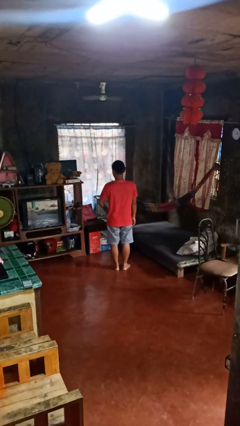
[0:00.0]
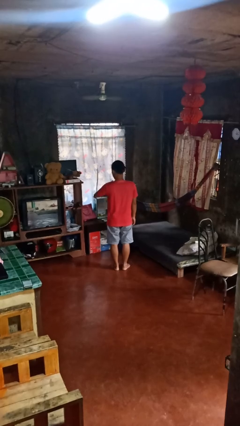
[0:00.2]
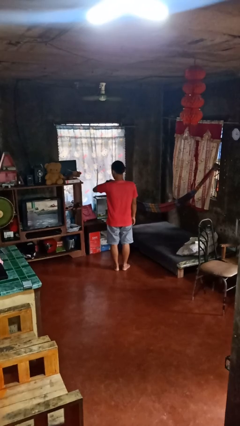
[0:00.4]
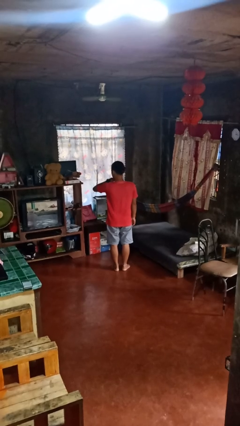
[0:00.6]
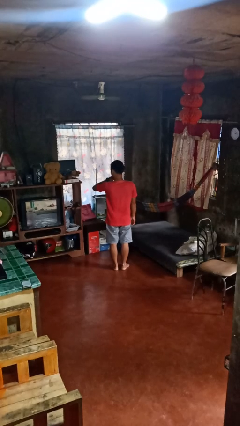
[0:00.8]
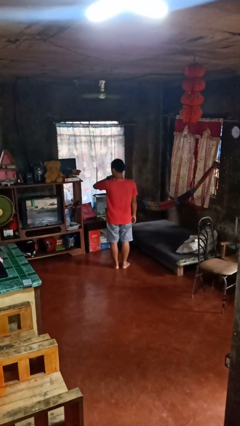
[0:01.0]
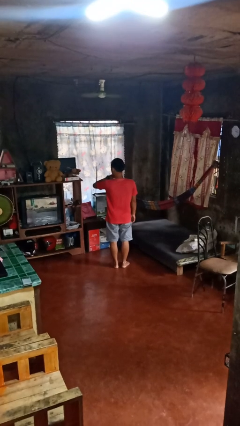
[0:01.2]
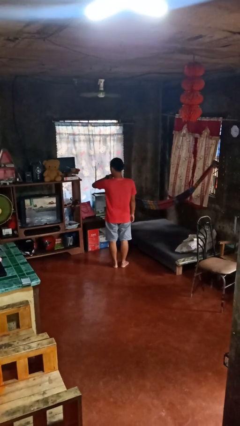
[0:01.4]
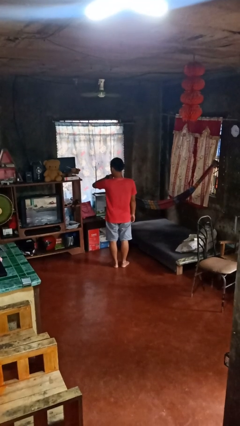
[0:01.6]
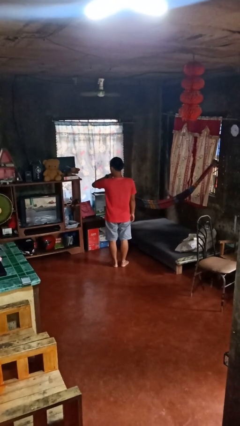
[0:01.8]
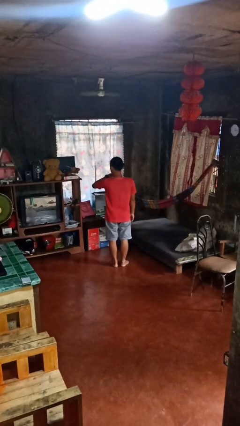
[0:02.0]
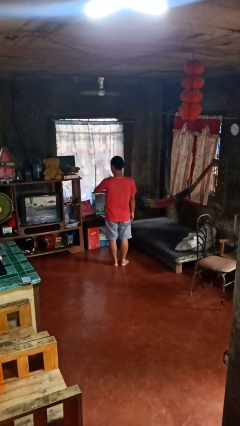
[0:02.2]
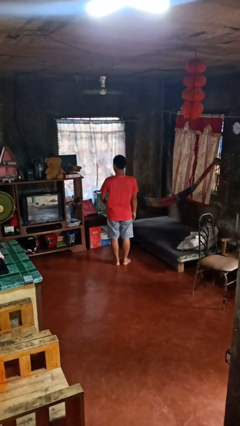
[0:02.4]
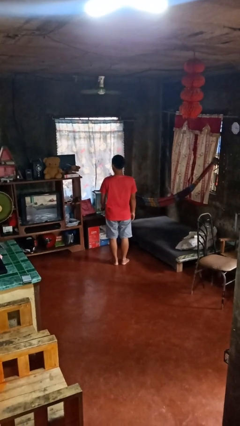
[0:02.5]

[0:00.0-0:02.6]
person looks at wristwatch

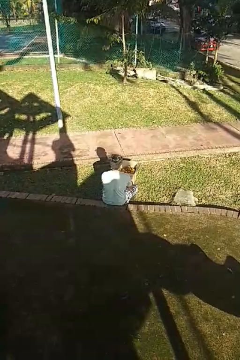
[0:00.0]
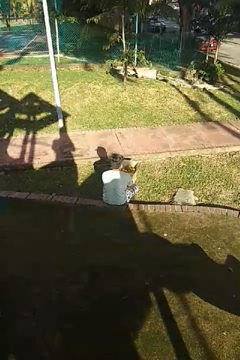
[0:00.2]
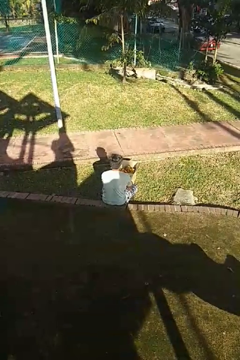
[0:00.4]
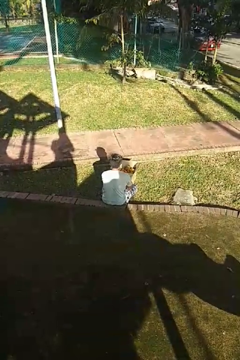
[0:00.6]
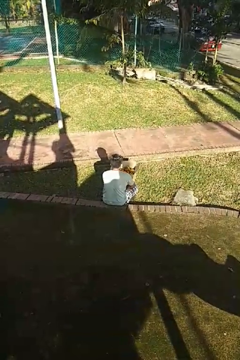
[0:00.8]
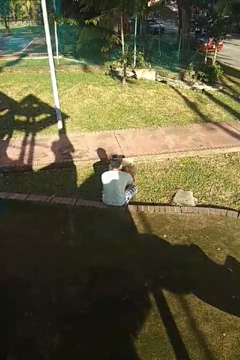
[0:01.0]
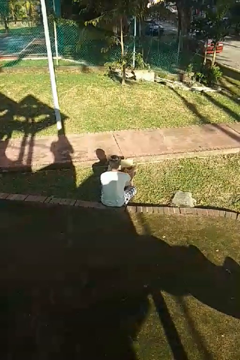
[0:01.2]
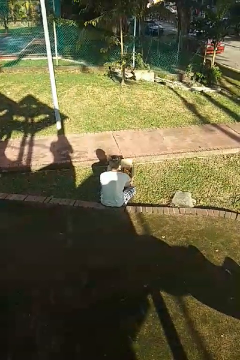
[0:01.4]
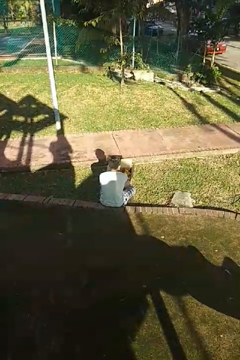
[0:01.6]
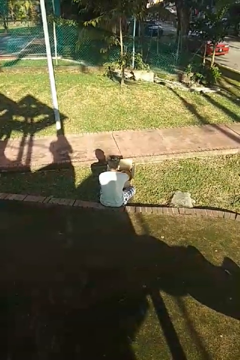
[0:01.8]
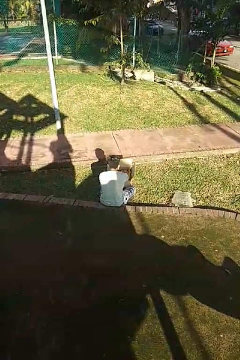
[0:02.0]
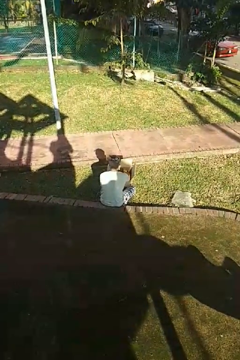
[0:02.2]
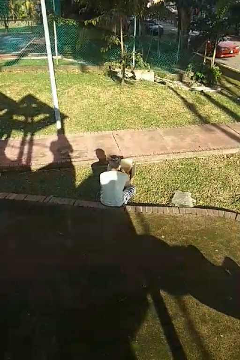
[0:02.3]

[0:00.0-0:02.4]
person searches in box

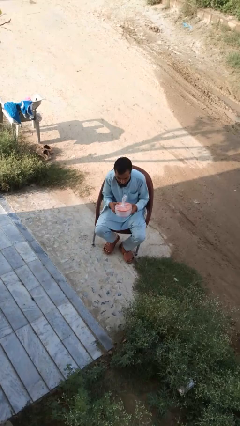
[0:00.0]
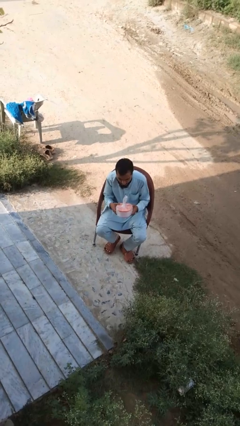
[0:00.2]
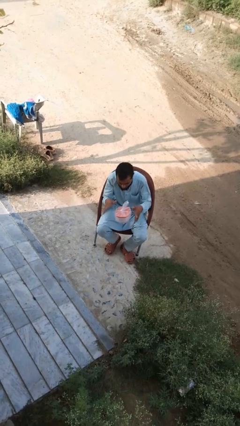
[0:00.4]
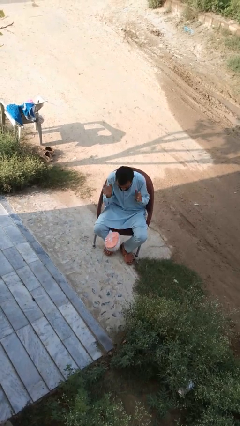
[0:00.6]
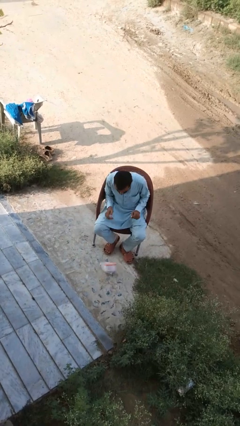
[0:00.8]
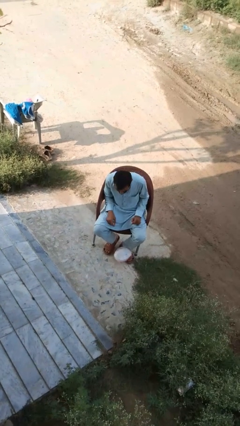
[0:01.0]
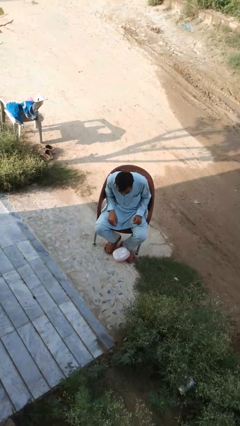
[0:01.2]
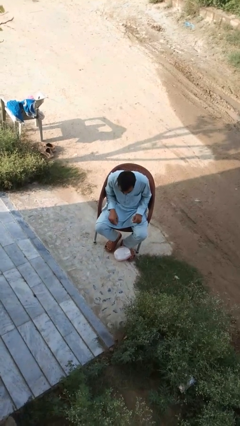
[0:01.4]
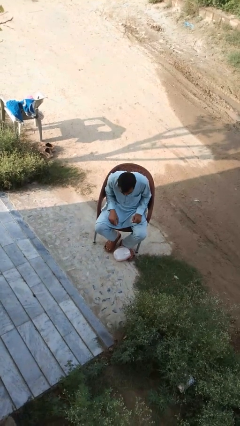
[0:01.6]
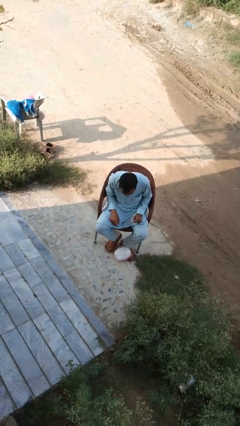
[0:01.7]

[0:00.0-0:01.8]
person drops object

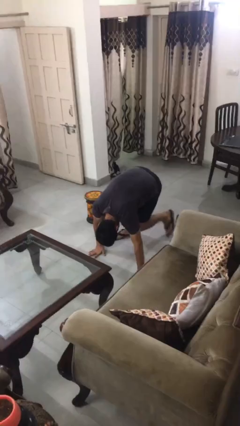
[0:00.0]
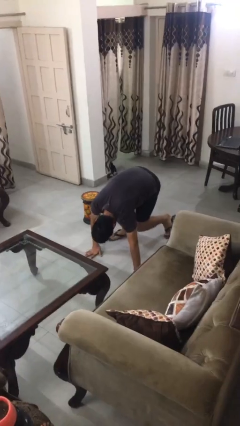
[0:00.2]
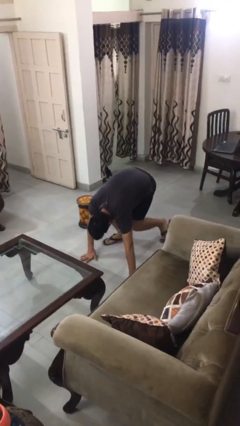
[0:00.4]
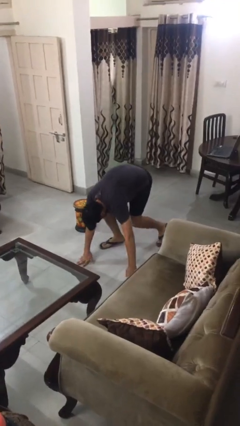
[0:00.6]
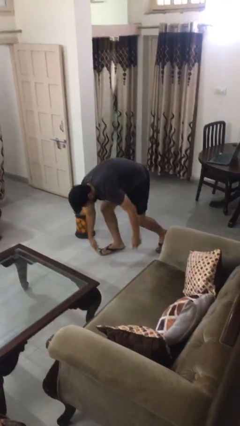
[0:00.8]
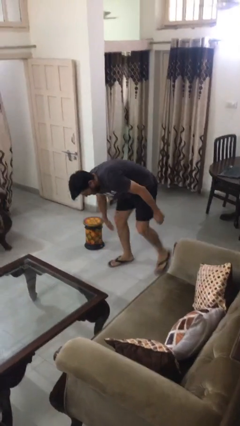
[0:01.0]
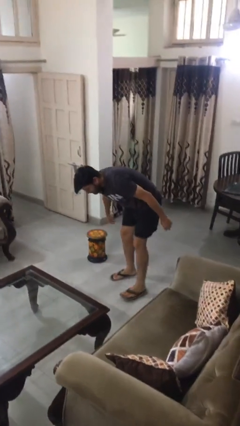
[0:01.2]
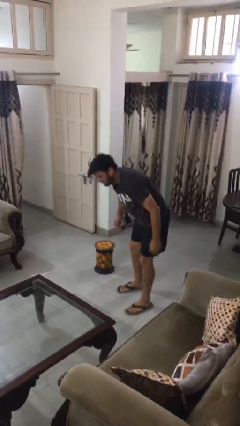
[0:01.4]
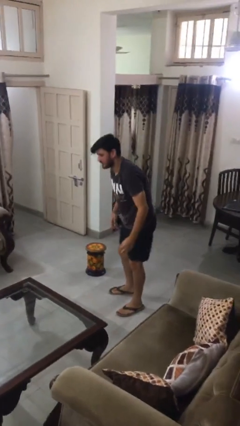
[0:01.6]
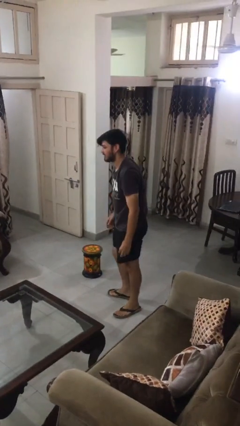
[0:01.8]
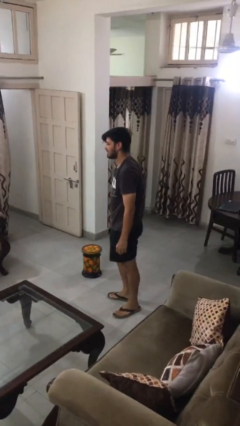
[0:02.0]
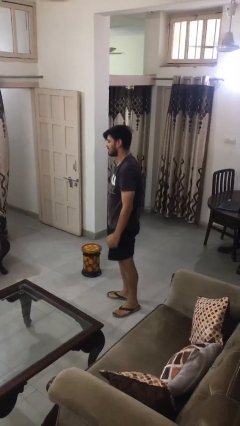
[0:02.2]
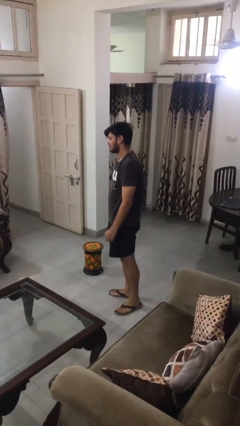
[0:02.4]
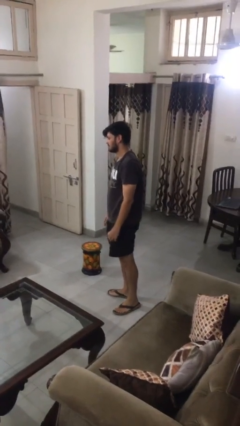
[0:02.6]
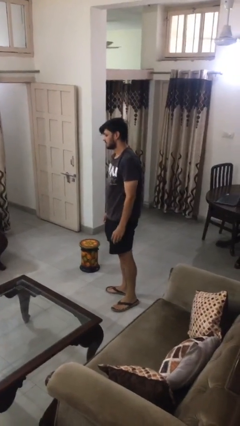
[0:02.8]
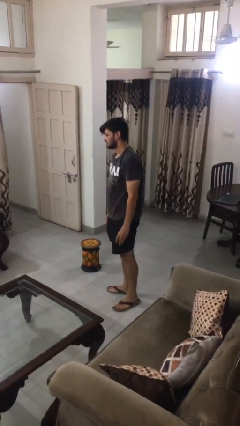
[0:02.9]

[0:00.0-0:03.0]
person stands up from floor

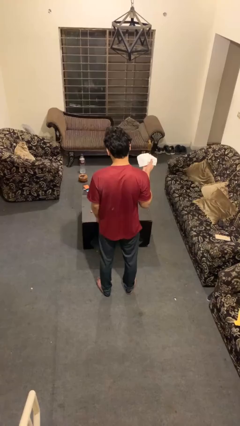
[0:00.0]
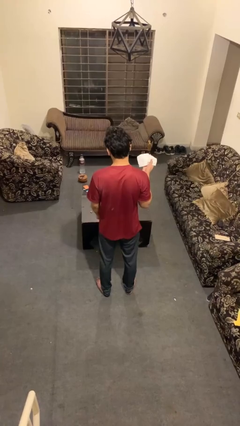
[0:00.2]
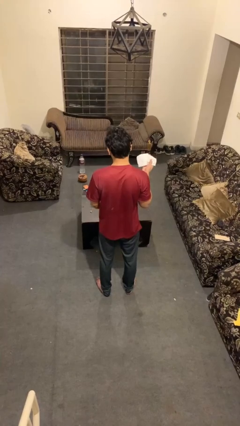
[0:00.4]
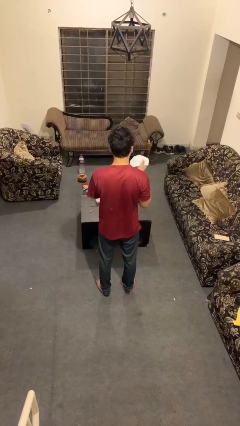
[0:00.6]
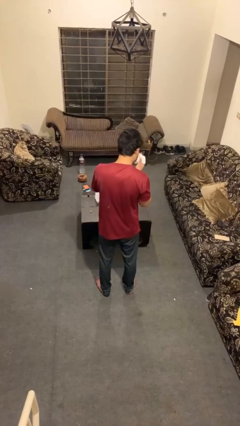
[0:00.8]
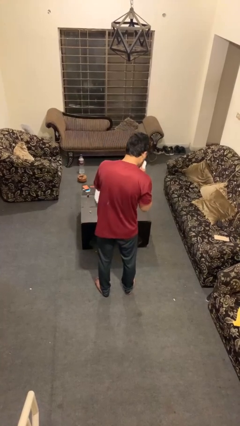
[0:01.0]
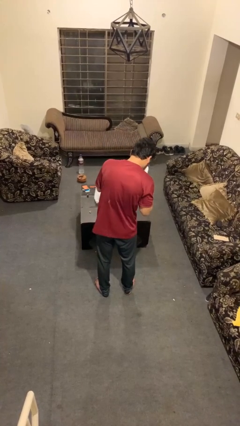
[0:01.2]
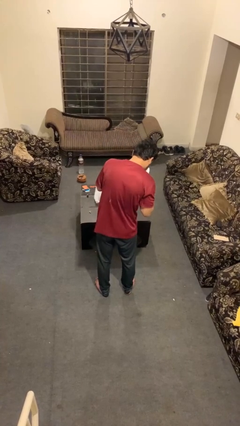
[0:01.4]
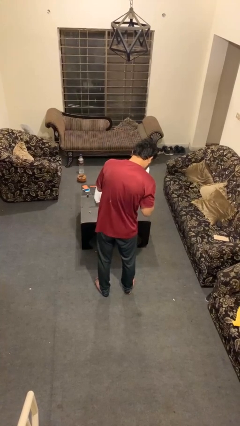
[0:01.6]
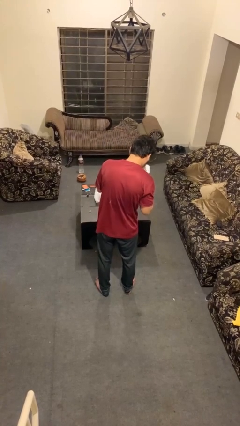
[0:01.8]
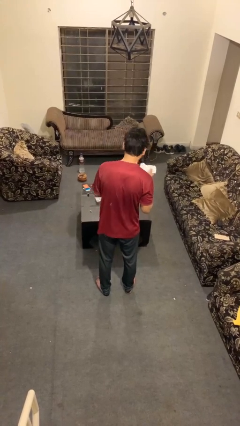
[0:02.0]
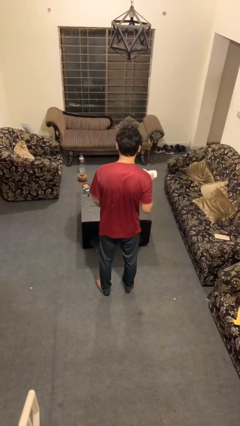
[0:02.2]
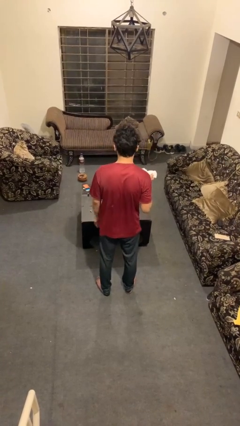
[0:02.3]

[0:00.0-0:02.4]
person blows nose

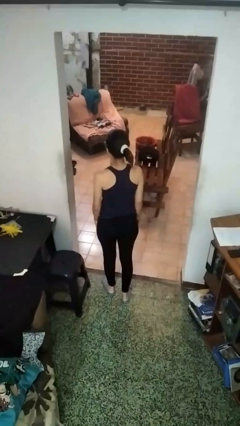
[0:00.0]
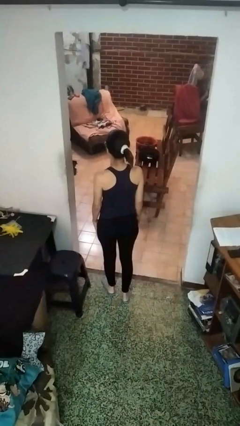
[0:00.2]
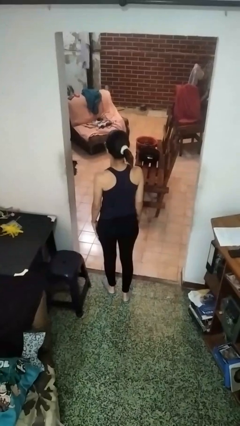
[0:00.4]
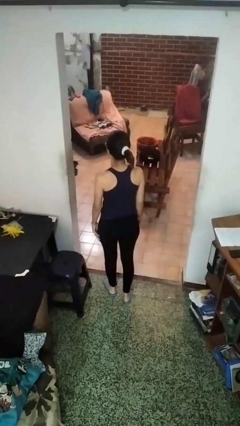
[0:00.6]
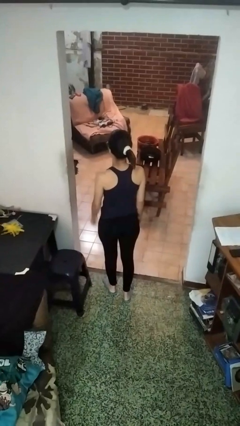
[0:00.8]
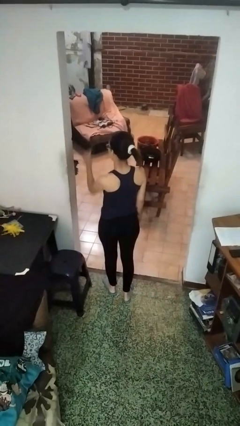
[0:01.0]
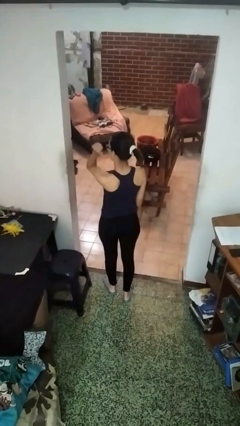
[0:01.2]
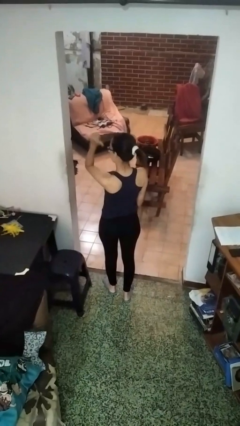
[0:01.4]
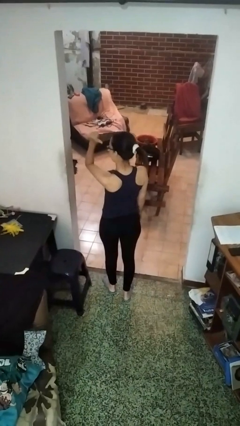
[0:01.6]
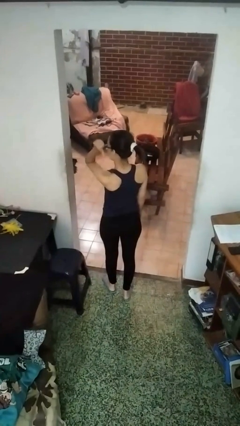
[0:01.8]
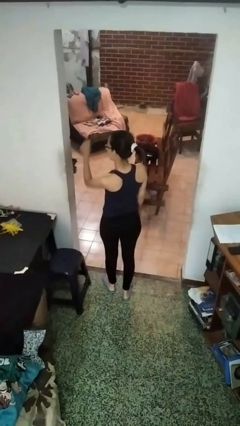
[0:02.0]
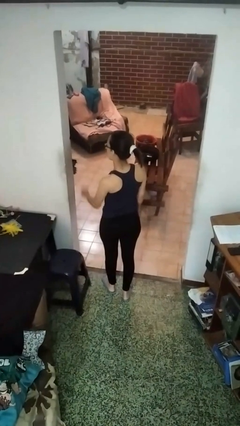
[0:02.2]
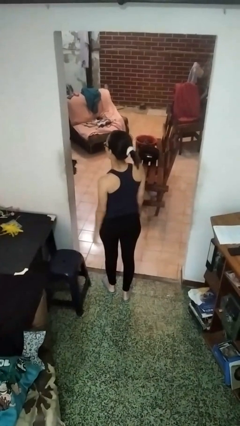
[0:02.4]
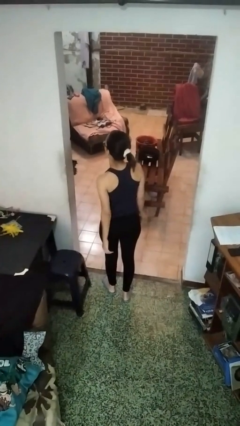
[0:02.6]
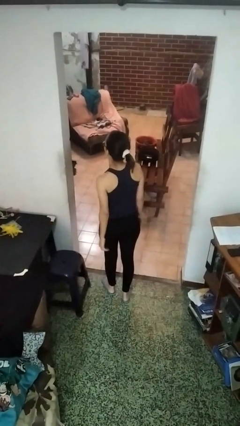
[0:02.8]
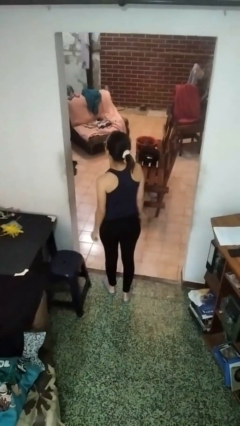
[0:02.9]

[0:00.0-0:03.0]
person gestures behind me

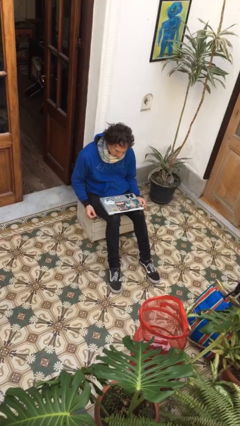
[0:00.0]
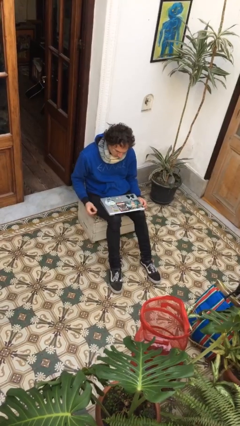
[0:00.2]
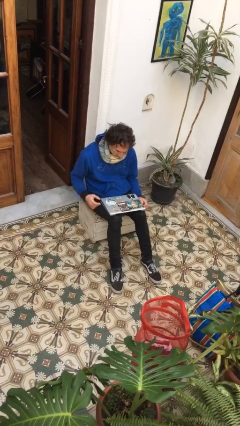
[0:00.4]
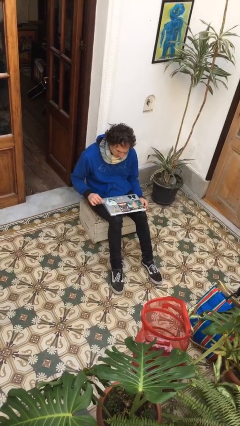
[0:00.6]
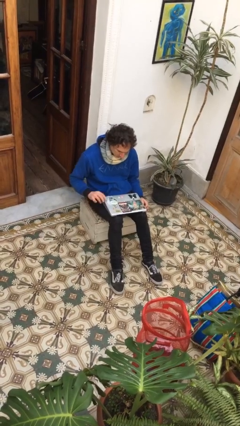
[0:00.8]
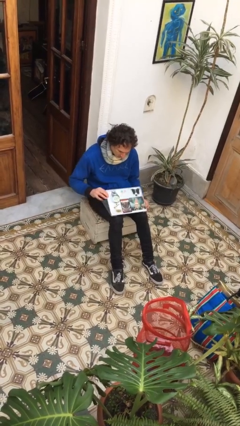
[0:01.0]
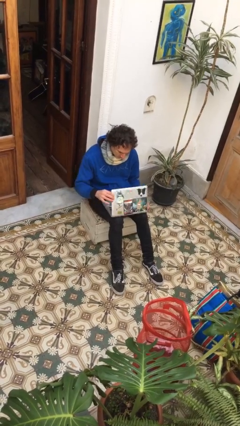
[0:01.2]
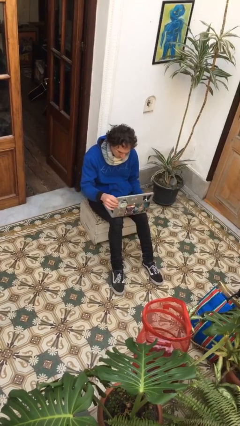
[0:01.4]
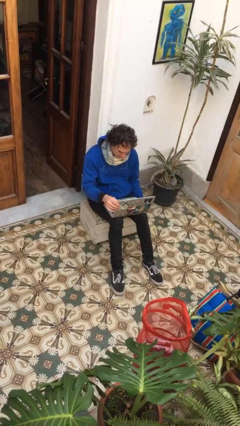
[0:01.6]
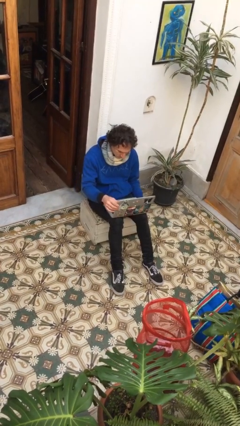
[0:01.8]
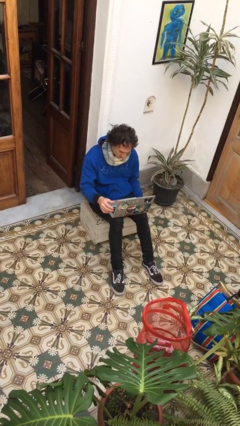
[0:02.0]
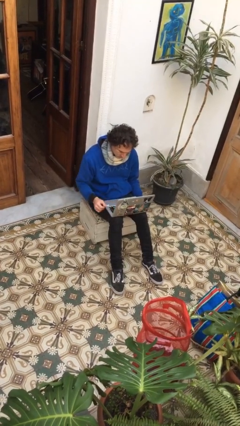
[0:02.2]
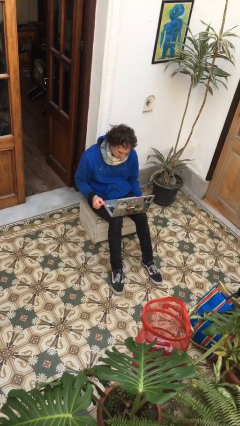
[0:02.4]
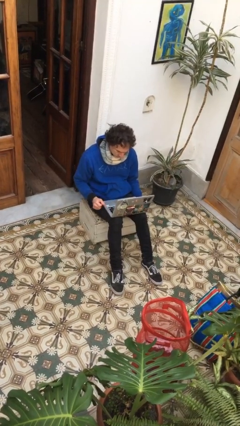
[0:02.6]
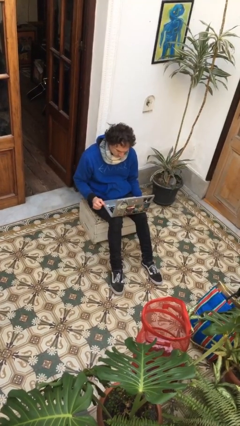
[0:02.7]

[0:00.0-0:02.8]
person opens laptop
